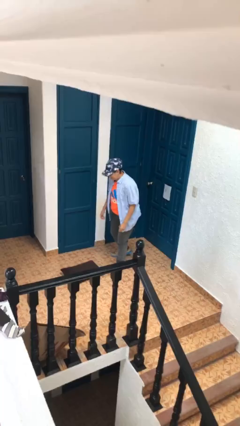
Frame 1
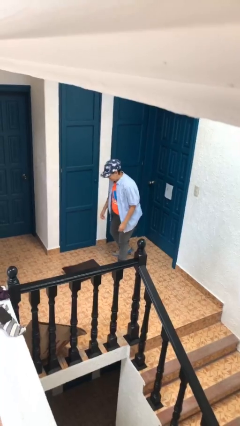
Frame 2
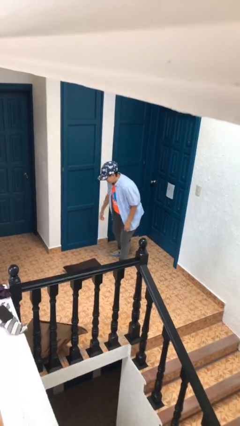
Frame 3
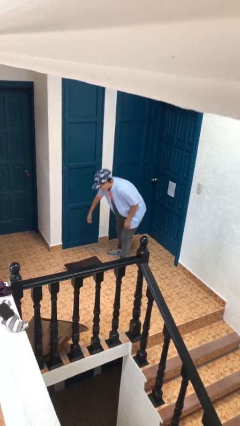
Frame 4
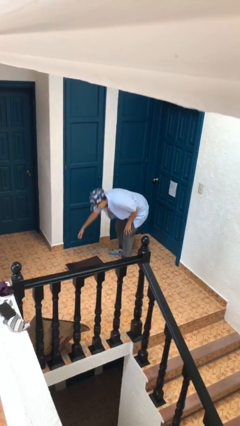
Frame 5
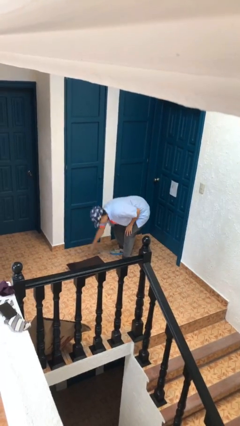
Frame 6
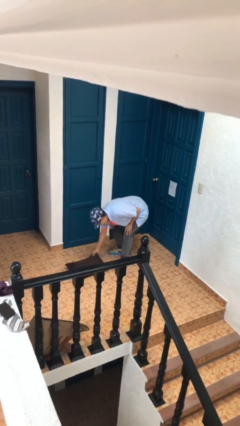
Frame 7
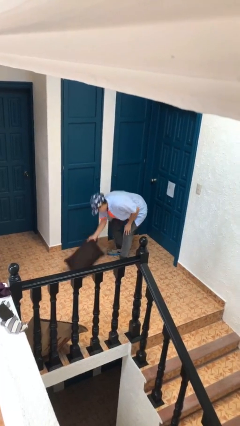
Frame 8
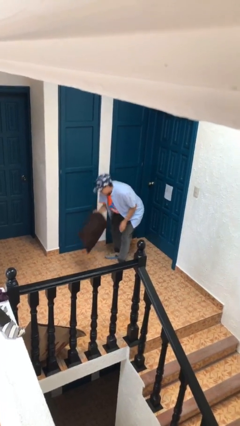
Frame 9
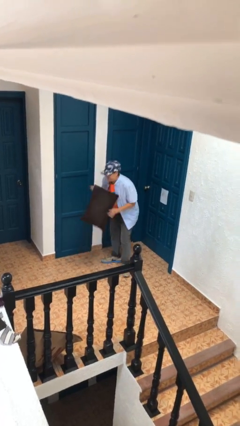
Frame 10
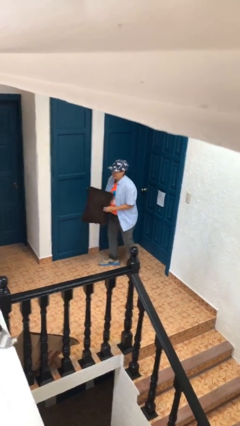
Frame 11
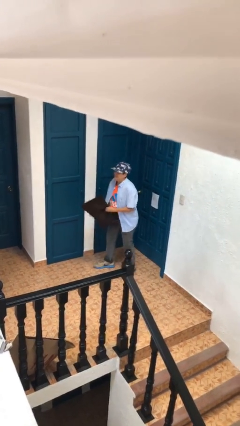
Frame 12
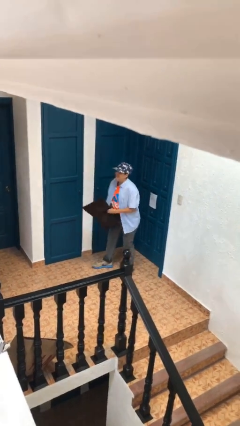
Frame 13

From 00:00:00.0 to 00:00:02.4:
person picks up object from floor

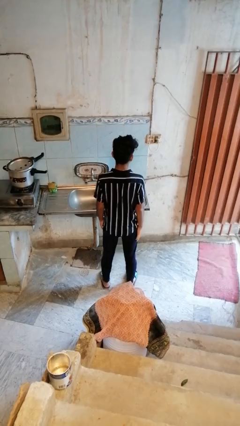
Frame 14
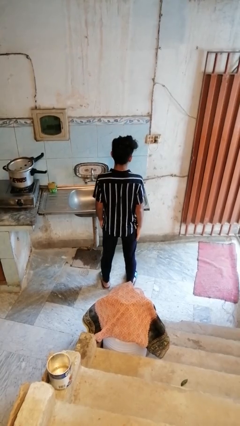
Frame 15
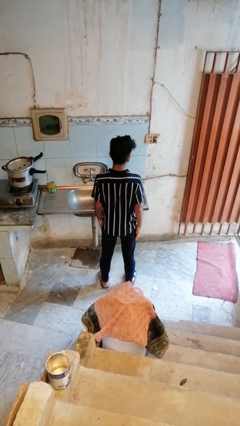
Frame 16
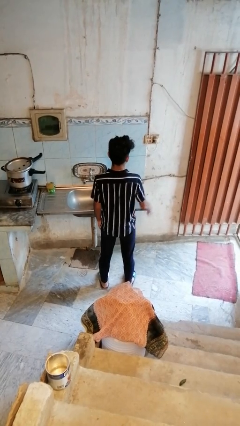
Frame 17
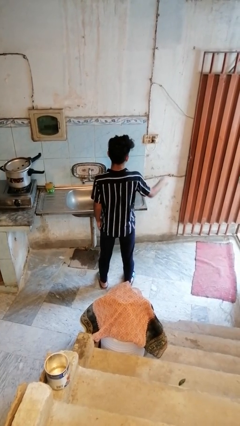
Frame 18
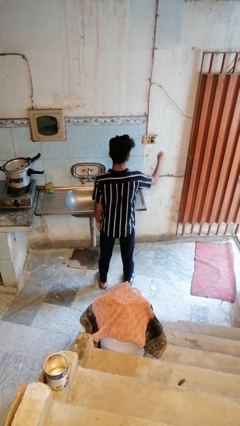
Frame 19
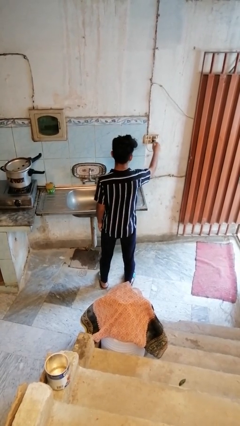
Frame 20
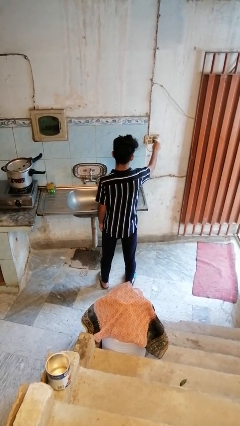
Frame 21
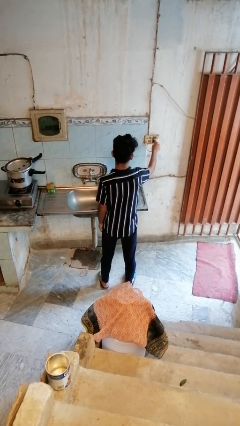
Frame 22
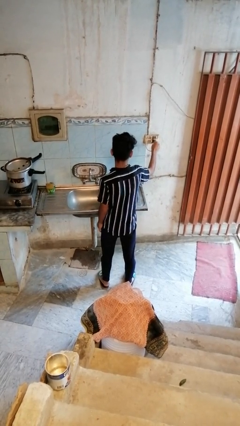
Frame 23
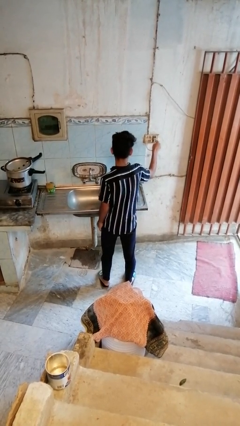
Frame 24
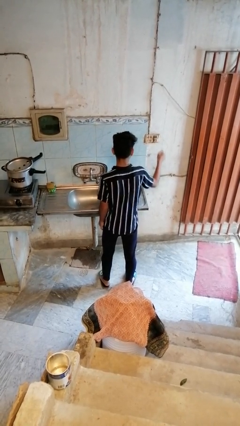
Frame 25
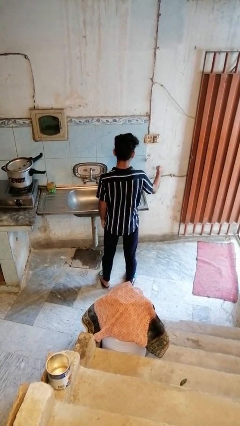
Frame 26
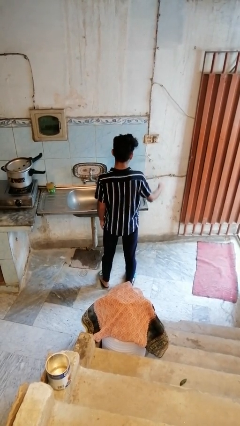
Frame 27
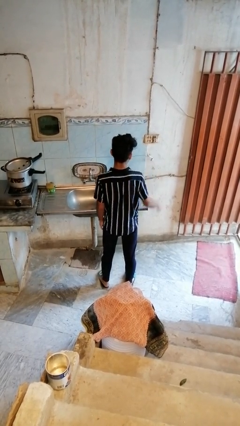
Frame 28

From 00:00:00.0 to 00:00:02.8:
person unplugs from electrical socket

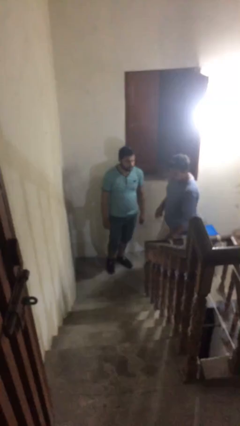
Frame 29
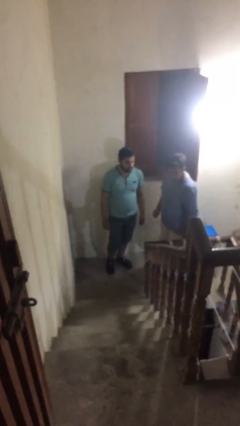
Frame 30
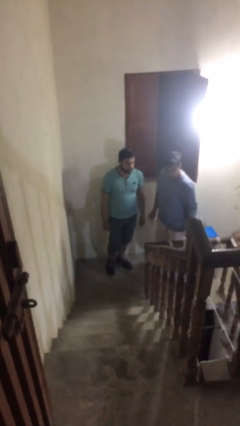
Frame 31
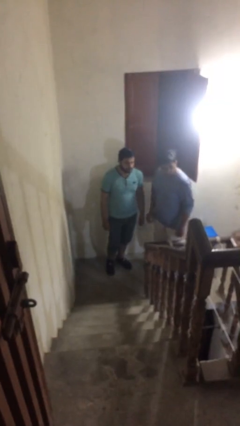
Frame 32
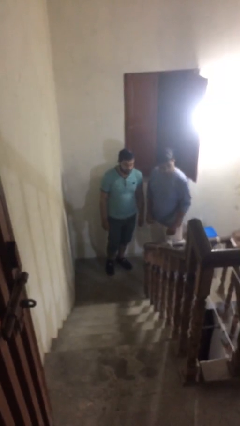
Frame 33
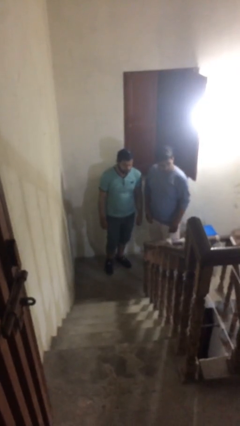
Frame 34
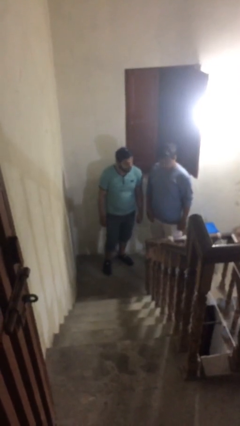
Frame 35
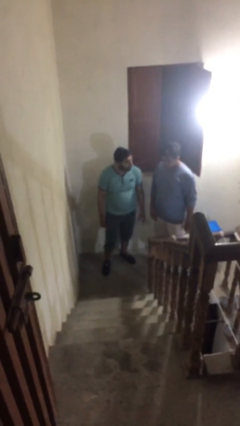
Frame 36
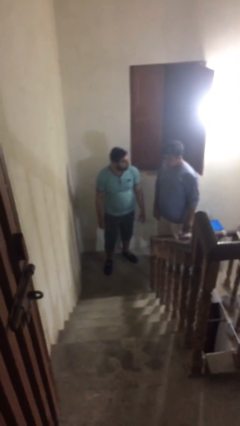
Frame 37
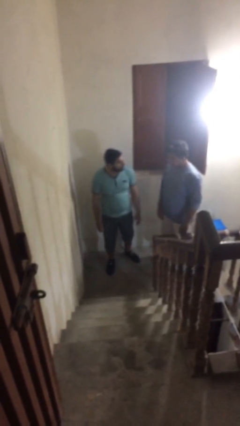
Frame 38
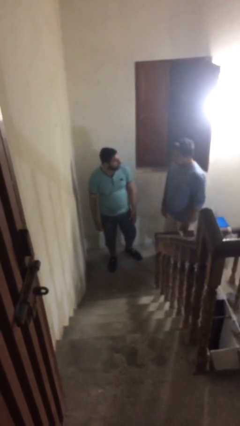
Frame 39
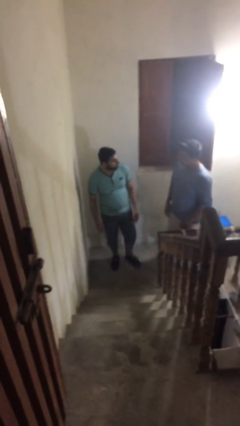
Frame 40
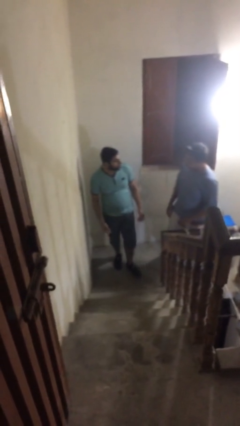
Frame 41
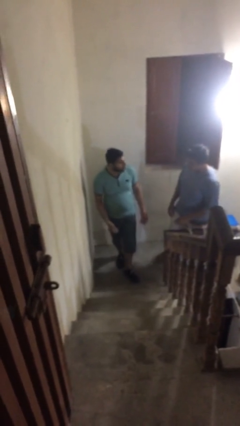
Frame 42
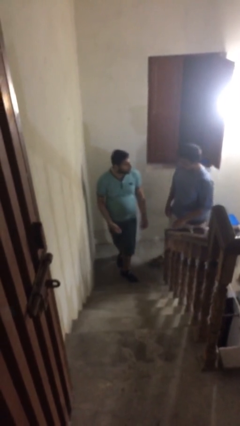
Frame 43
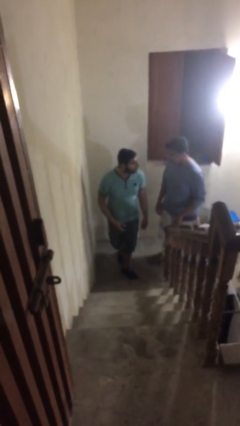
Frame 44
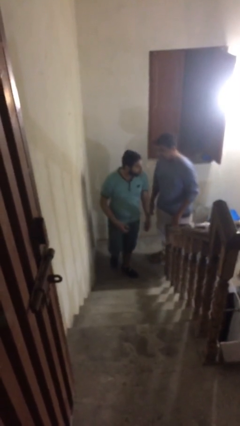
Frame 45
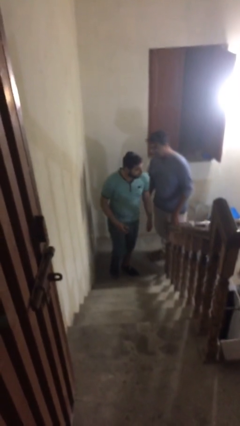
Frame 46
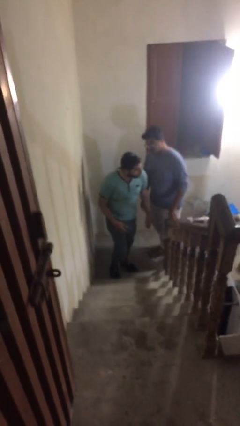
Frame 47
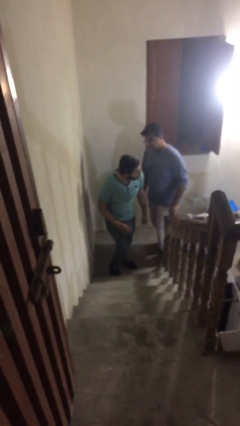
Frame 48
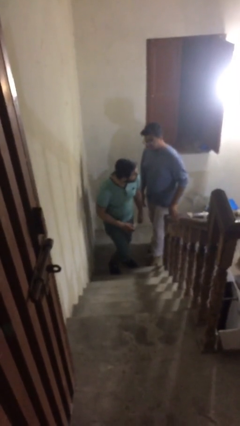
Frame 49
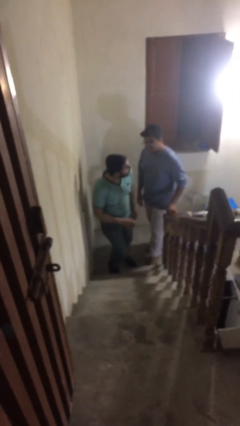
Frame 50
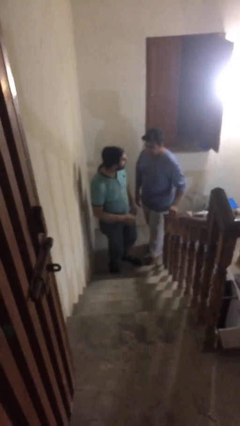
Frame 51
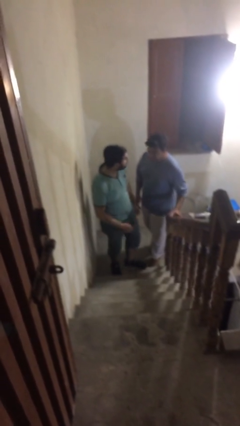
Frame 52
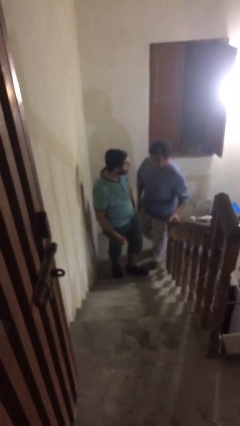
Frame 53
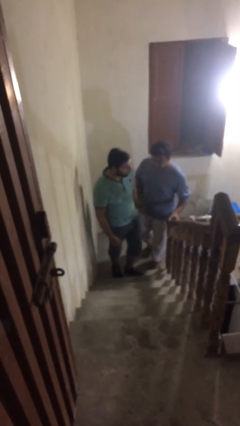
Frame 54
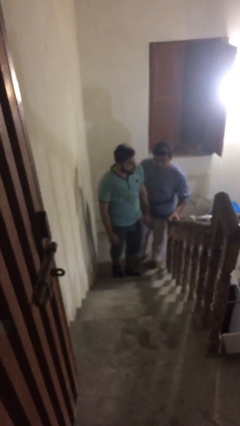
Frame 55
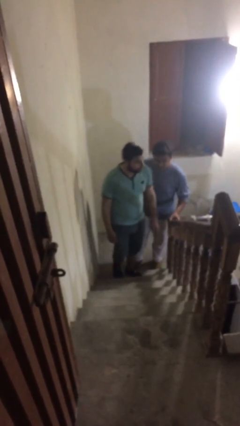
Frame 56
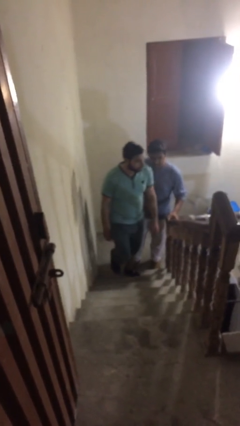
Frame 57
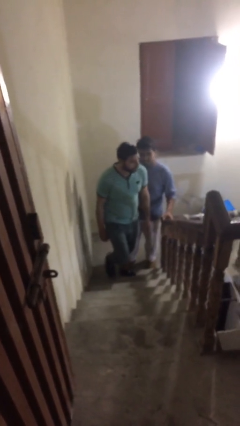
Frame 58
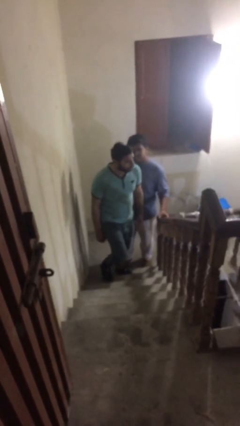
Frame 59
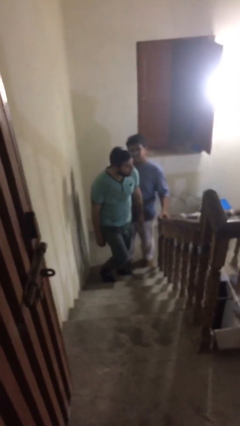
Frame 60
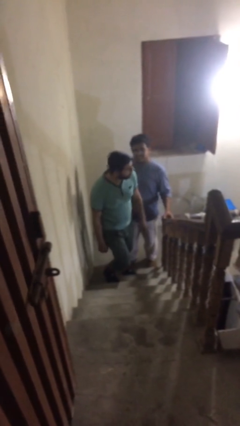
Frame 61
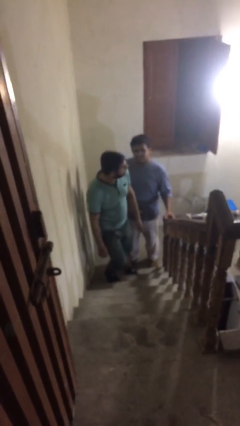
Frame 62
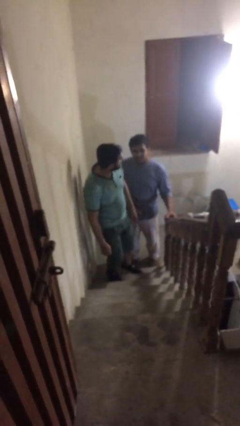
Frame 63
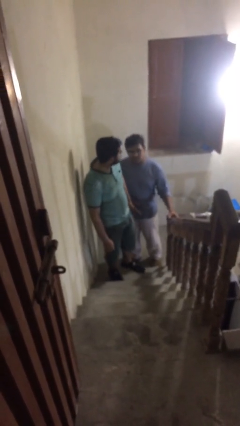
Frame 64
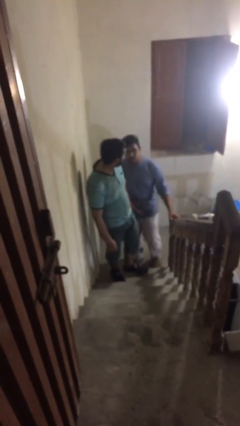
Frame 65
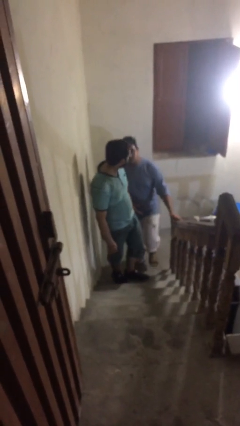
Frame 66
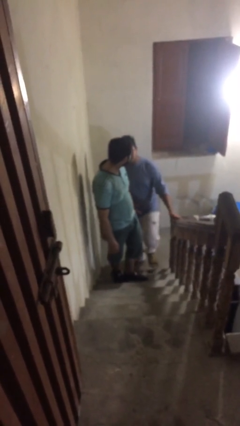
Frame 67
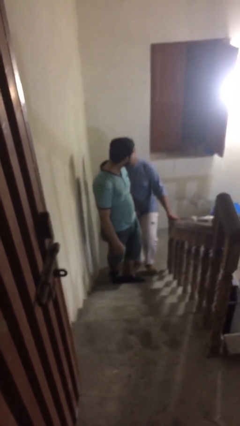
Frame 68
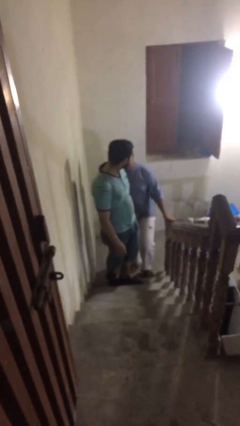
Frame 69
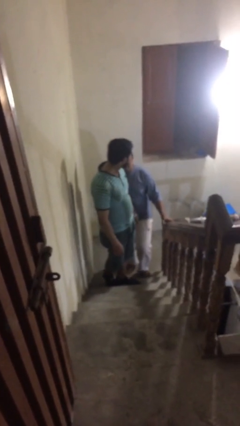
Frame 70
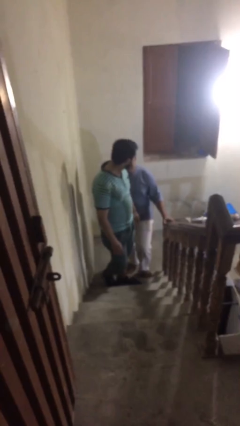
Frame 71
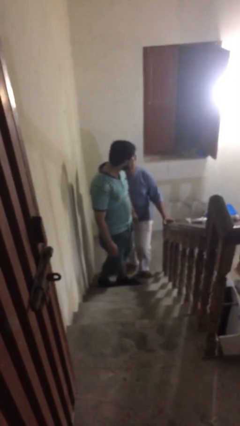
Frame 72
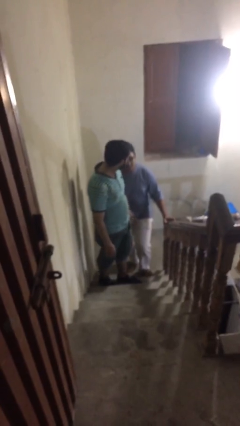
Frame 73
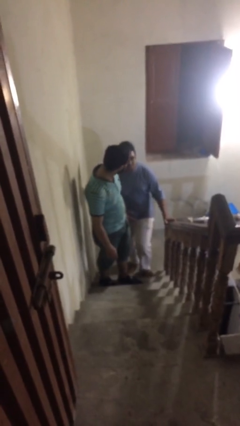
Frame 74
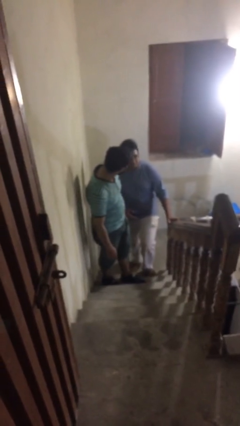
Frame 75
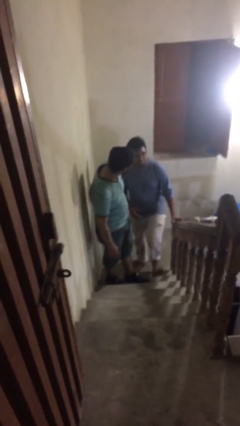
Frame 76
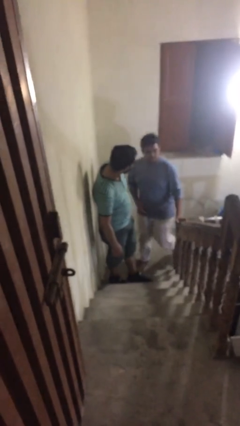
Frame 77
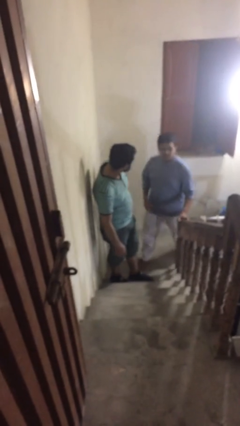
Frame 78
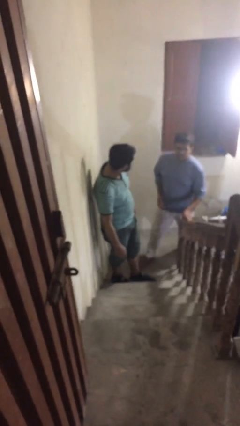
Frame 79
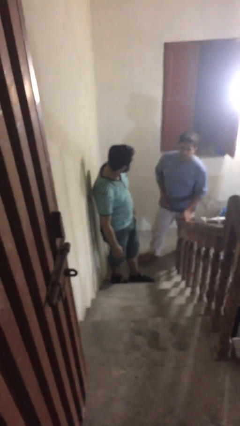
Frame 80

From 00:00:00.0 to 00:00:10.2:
person talks to person

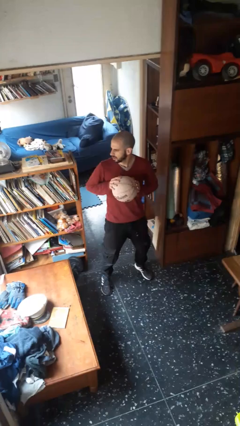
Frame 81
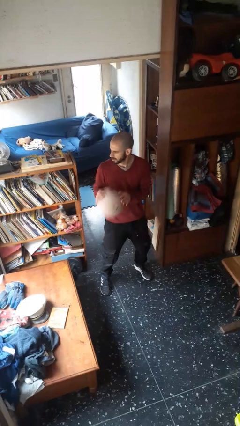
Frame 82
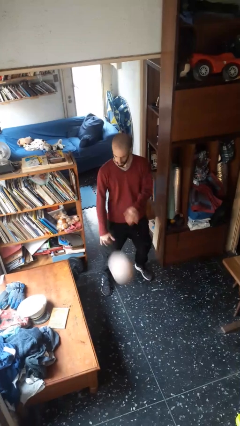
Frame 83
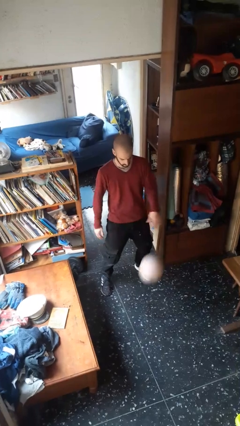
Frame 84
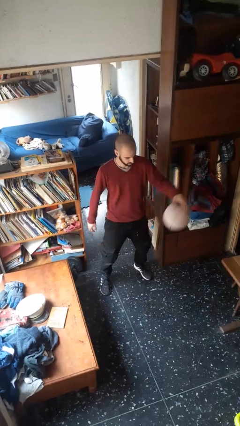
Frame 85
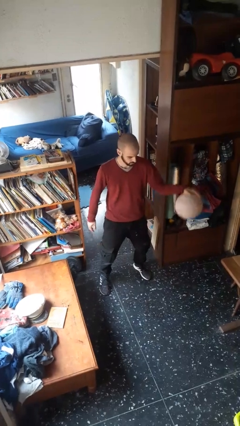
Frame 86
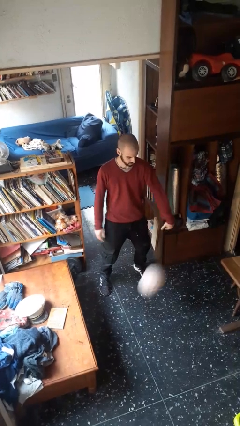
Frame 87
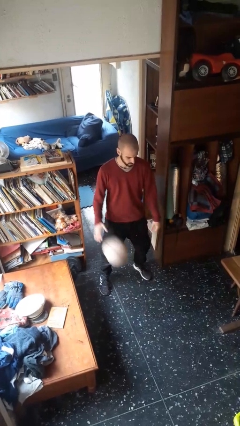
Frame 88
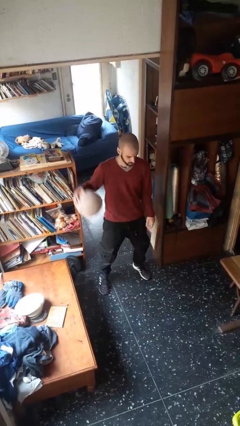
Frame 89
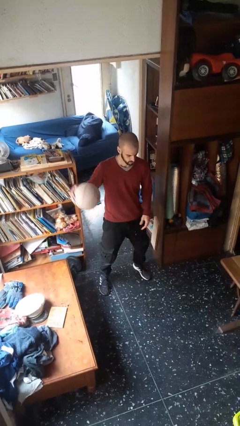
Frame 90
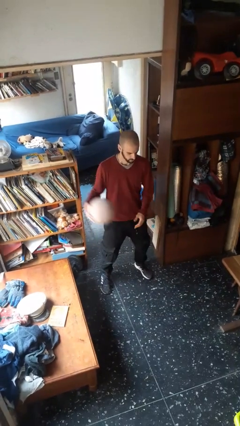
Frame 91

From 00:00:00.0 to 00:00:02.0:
person bounces ball on floor
